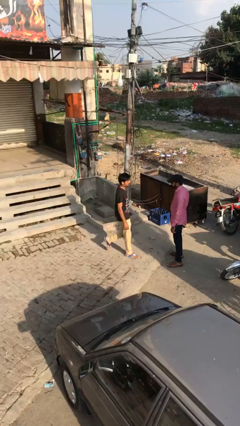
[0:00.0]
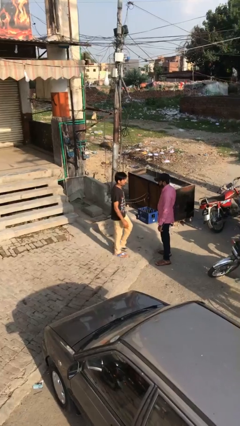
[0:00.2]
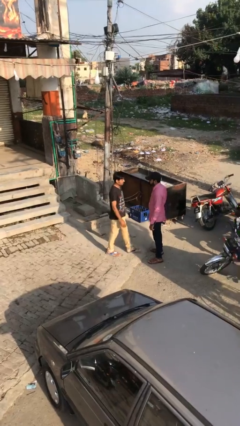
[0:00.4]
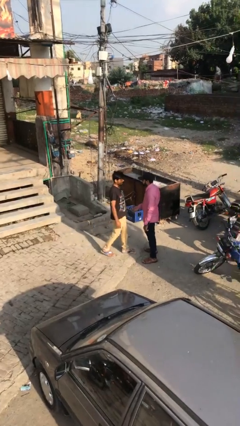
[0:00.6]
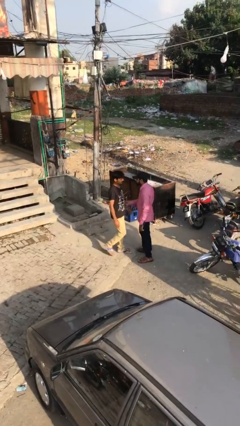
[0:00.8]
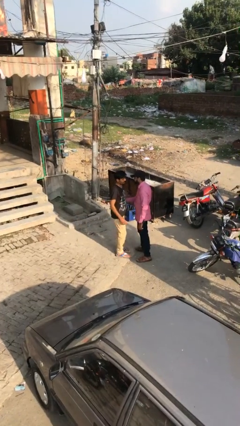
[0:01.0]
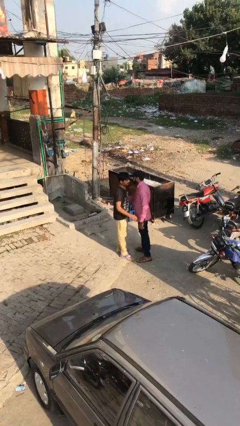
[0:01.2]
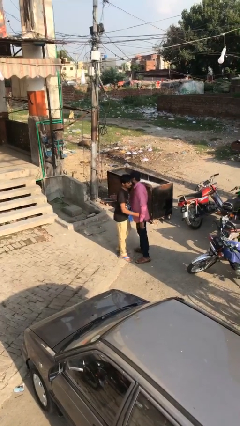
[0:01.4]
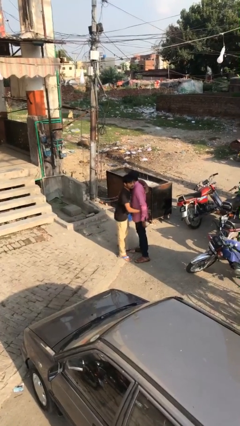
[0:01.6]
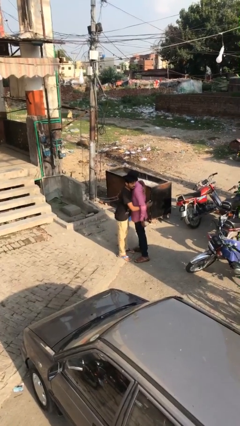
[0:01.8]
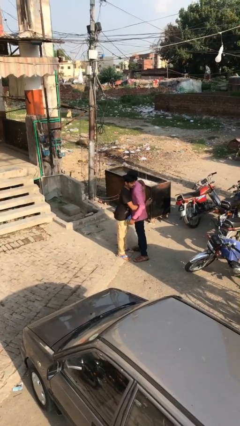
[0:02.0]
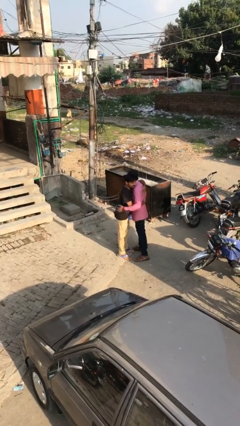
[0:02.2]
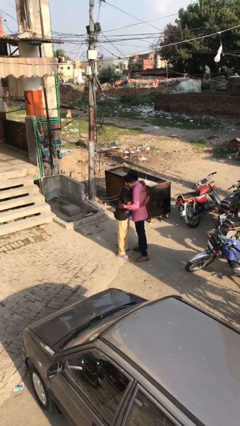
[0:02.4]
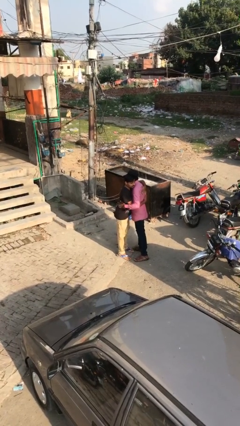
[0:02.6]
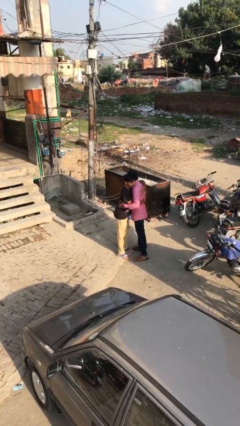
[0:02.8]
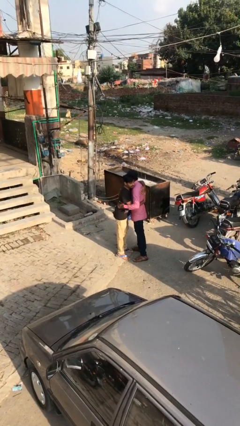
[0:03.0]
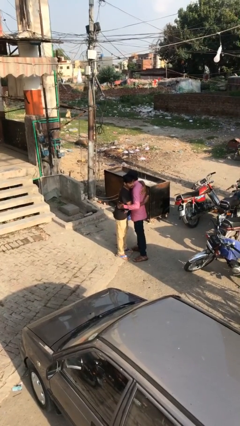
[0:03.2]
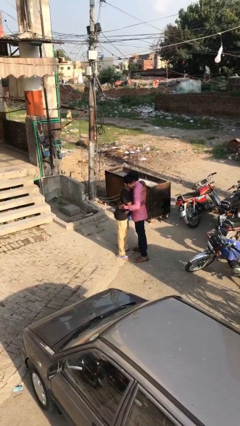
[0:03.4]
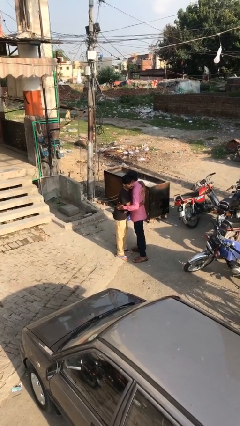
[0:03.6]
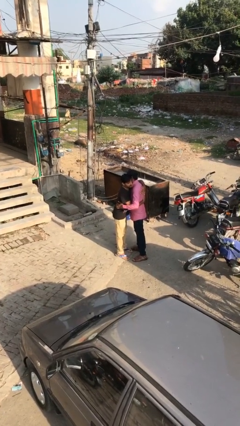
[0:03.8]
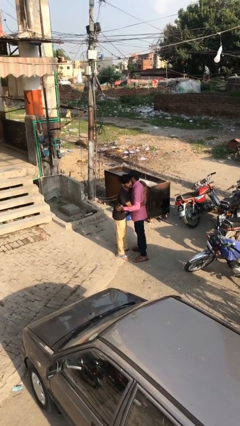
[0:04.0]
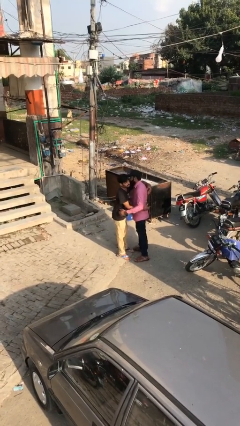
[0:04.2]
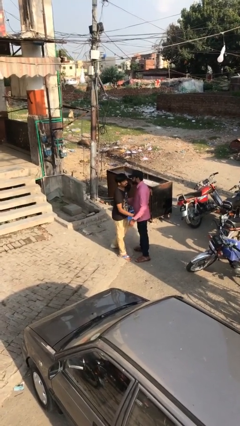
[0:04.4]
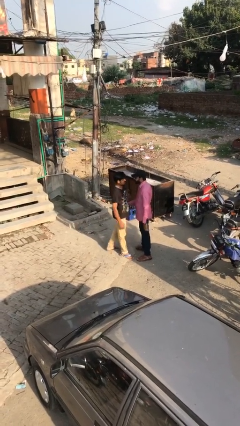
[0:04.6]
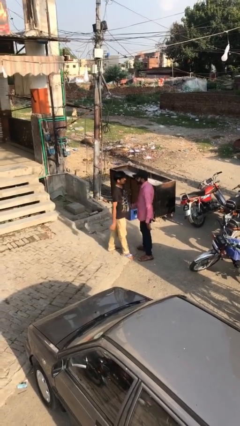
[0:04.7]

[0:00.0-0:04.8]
person embraces person

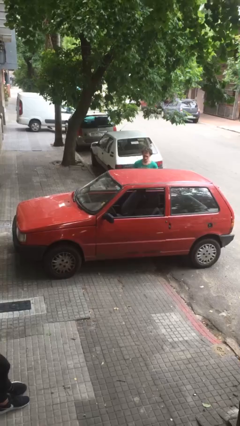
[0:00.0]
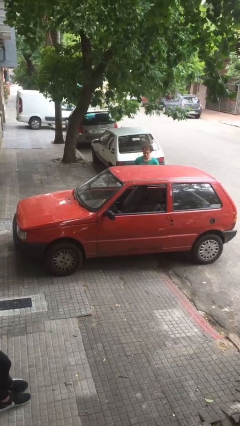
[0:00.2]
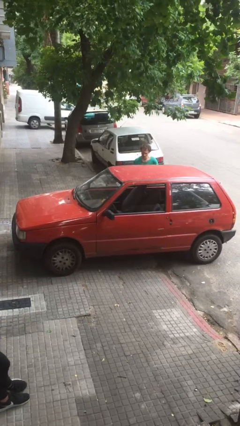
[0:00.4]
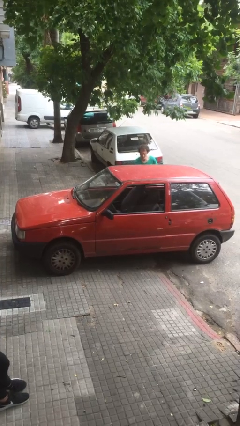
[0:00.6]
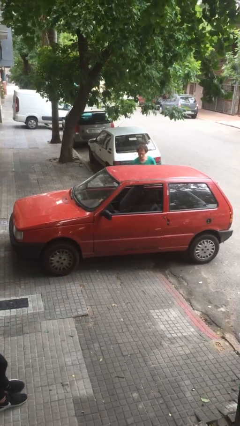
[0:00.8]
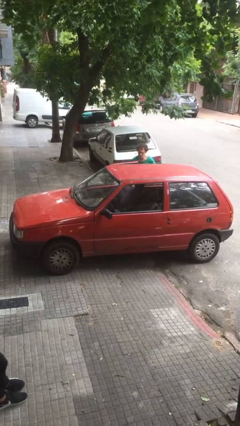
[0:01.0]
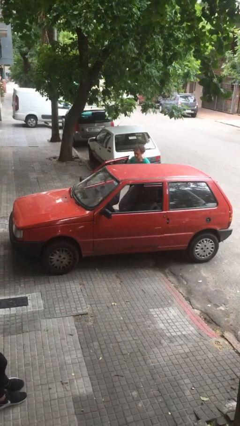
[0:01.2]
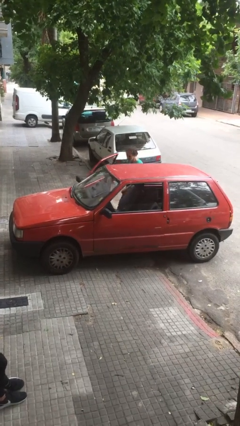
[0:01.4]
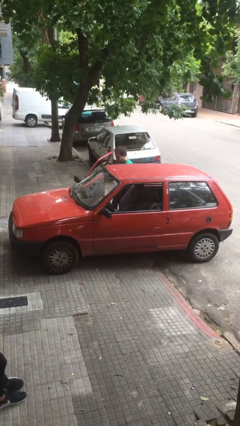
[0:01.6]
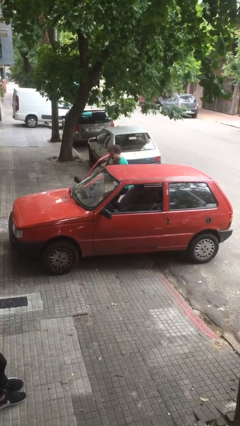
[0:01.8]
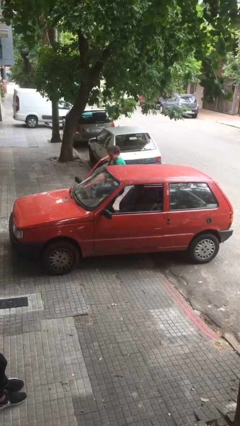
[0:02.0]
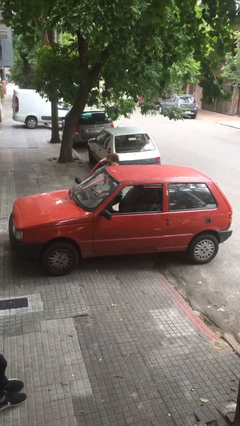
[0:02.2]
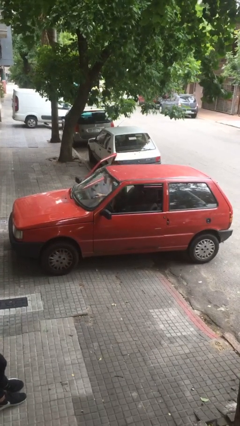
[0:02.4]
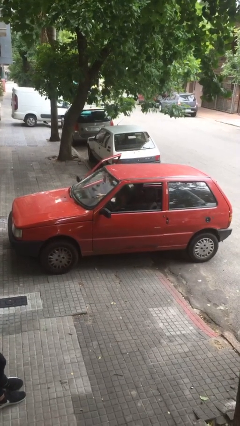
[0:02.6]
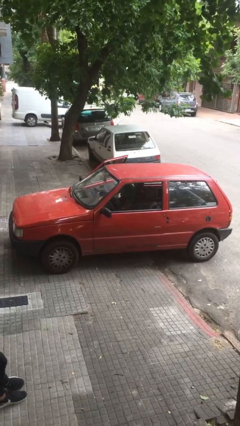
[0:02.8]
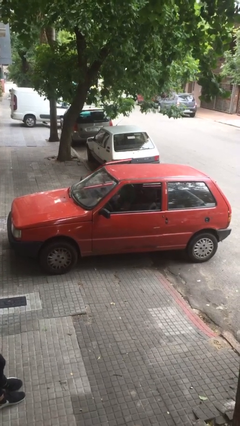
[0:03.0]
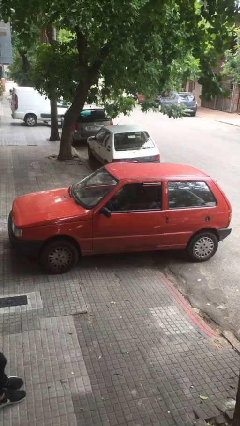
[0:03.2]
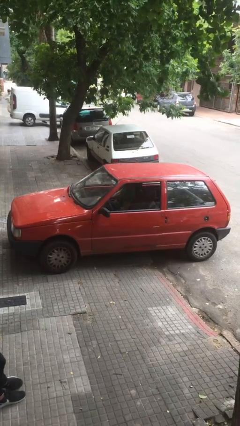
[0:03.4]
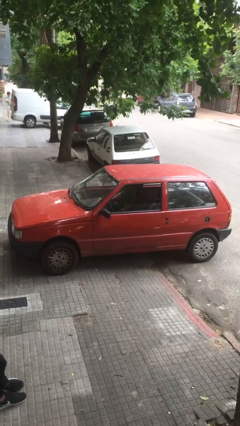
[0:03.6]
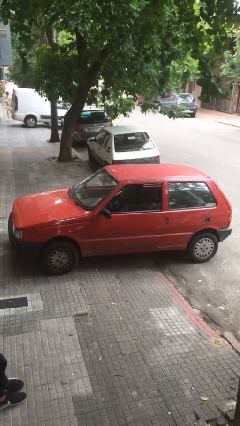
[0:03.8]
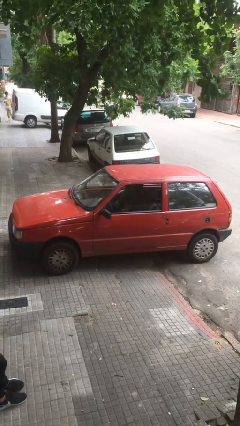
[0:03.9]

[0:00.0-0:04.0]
car picks up person

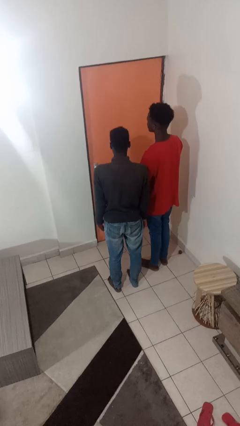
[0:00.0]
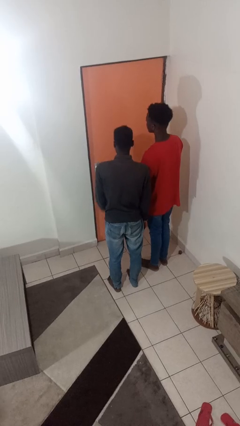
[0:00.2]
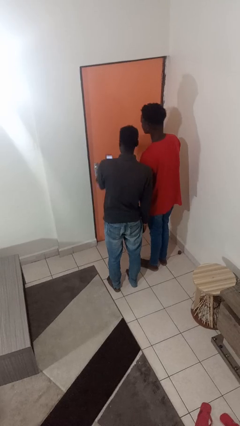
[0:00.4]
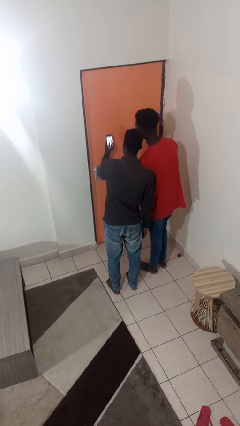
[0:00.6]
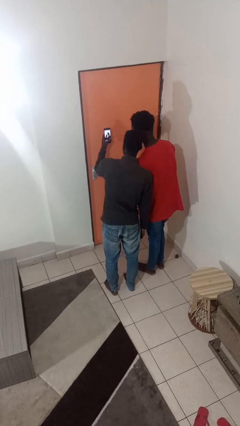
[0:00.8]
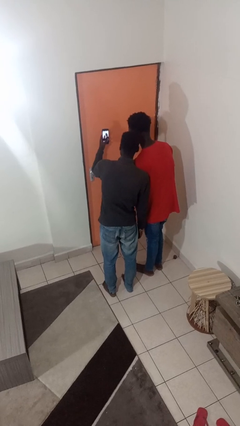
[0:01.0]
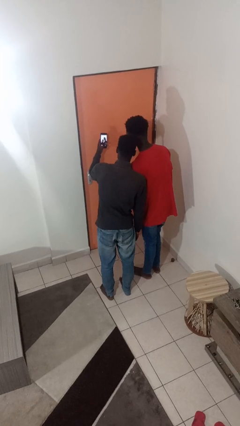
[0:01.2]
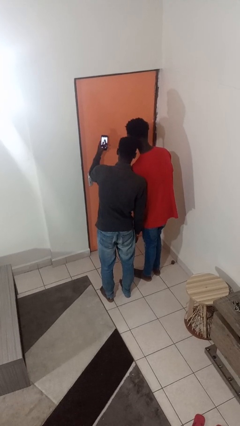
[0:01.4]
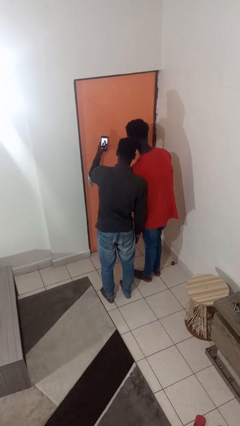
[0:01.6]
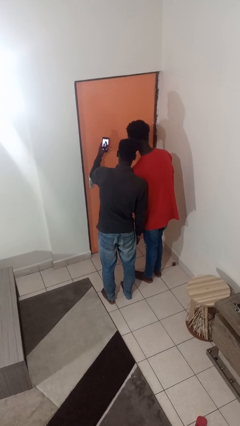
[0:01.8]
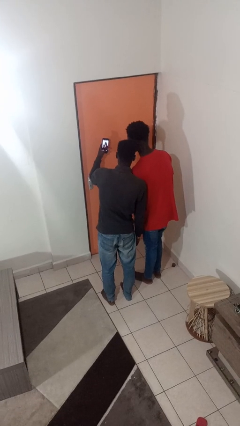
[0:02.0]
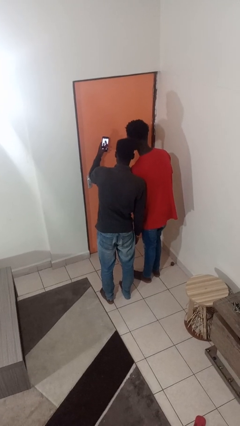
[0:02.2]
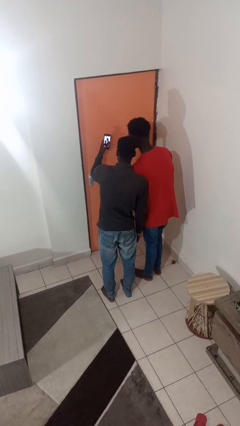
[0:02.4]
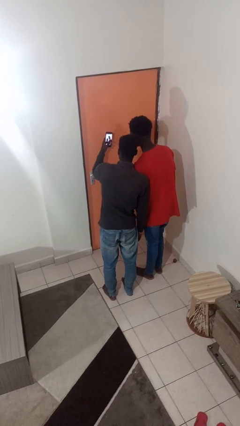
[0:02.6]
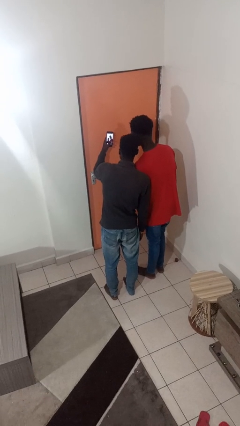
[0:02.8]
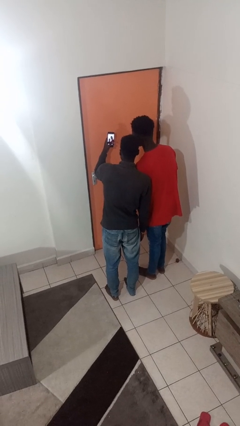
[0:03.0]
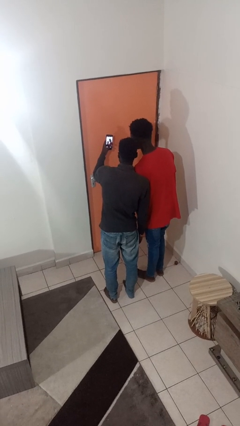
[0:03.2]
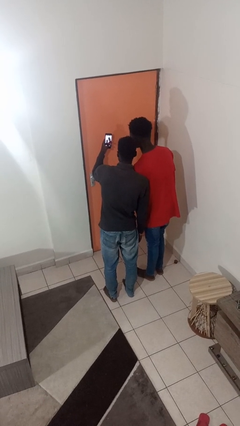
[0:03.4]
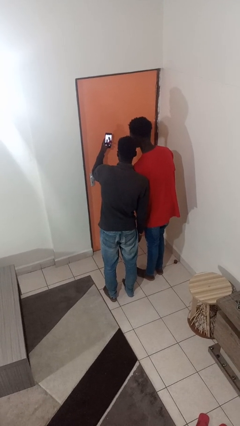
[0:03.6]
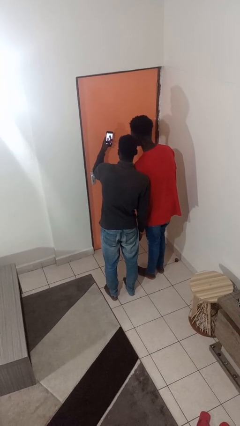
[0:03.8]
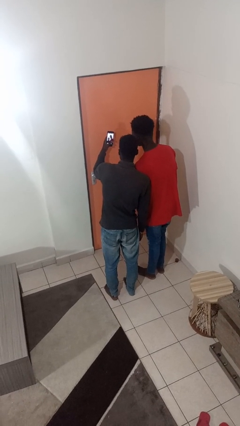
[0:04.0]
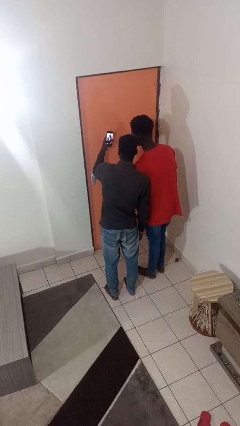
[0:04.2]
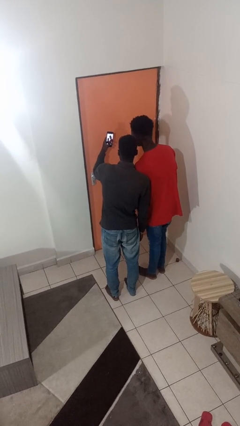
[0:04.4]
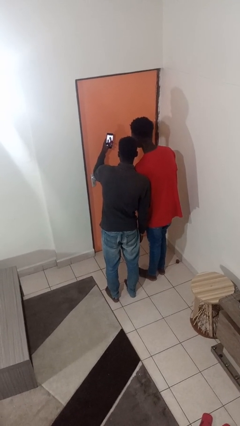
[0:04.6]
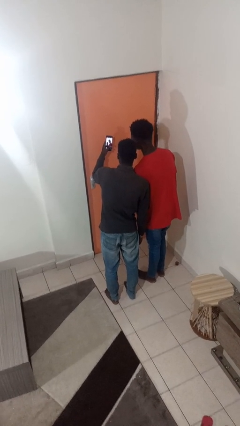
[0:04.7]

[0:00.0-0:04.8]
person takes selfie with person

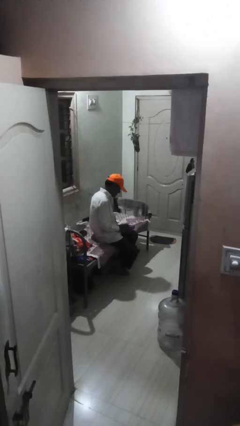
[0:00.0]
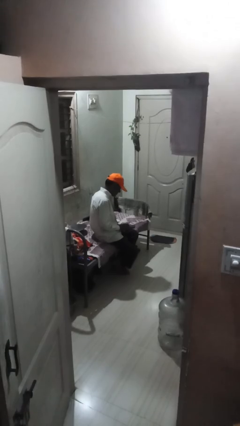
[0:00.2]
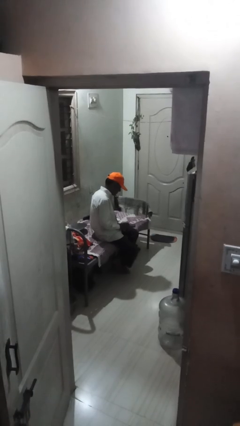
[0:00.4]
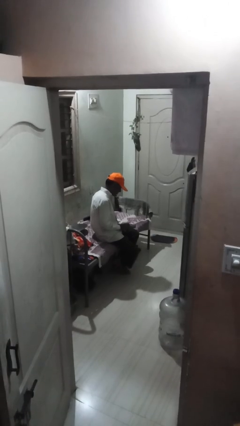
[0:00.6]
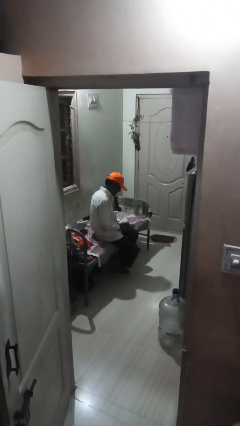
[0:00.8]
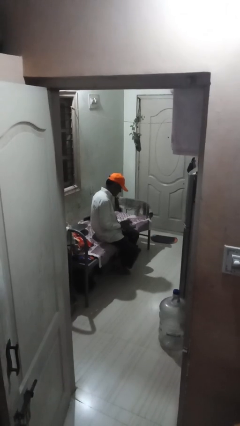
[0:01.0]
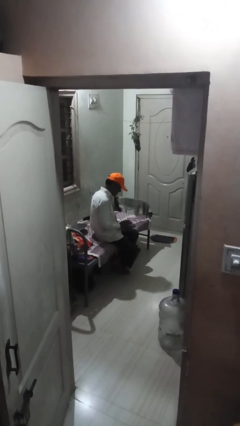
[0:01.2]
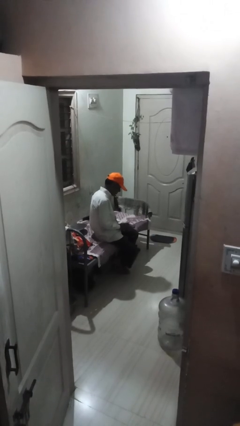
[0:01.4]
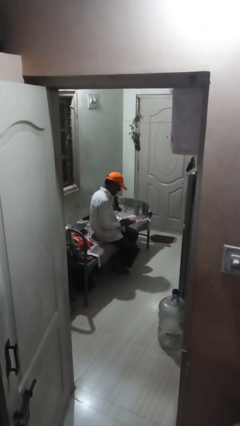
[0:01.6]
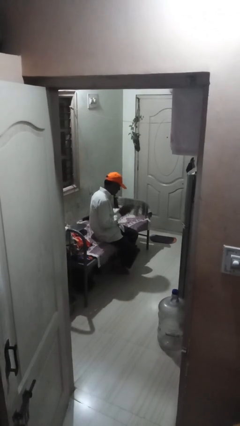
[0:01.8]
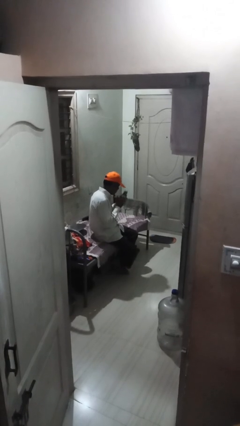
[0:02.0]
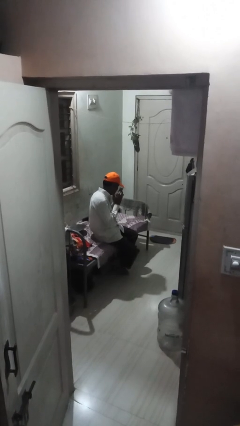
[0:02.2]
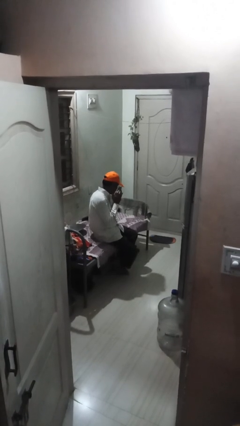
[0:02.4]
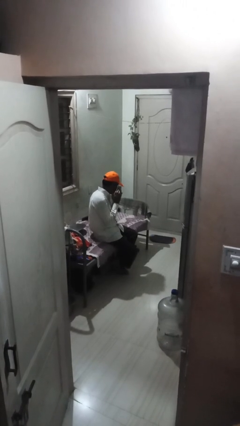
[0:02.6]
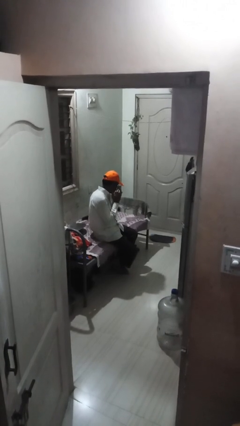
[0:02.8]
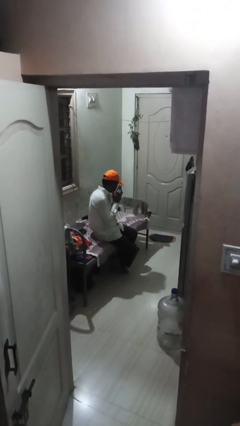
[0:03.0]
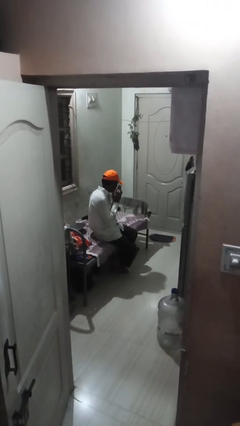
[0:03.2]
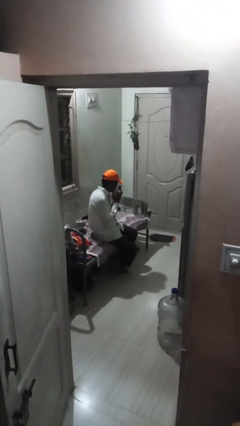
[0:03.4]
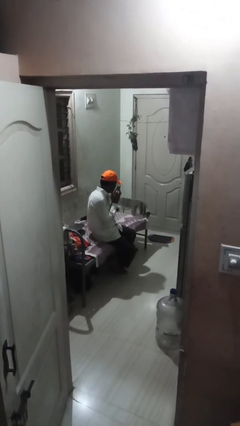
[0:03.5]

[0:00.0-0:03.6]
person taps object with finger

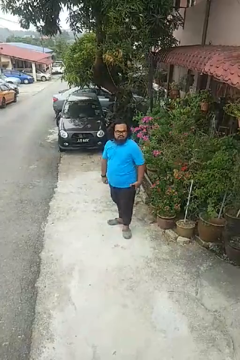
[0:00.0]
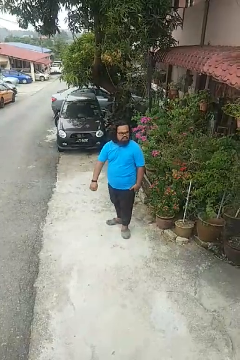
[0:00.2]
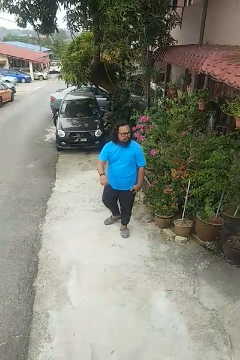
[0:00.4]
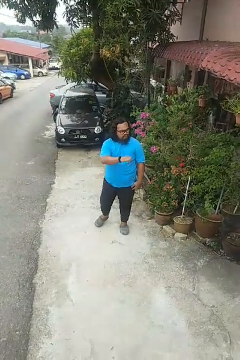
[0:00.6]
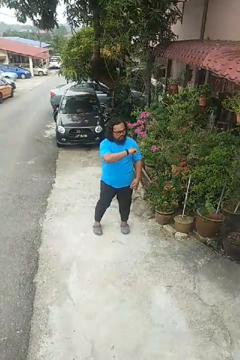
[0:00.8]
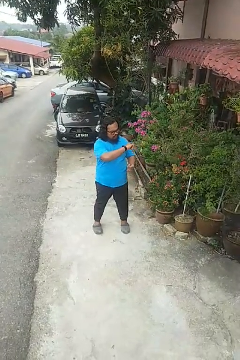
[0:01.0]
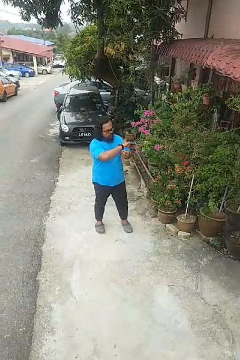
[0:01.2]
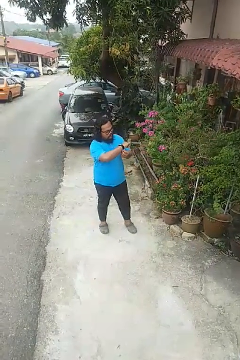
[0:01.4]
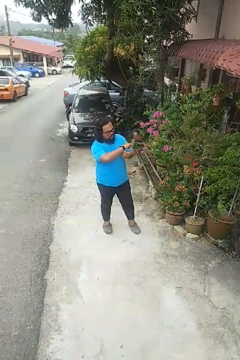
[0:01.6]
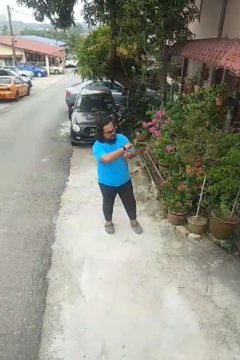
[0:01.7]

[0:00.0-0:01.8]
person looks at wristwatch
